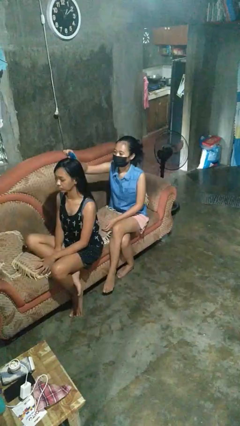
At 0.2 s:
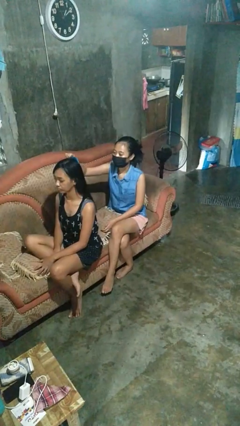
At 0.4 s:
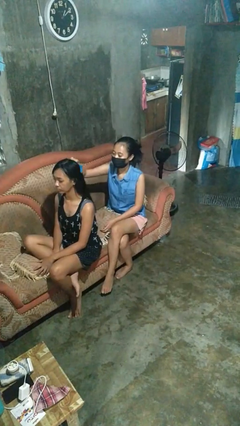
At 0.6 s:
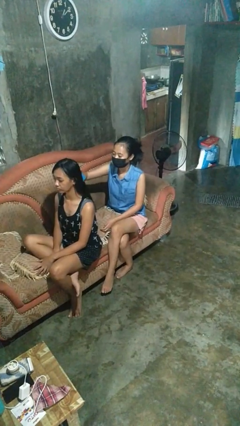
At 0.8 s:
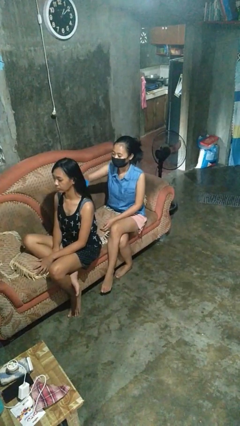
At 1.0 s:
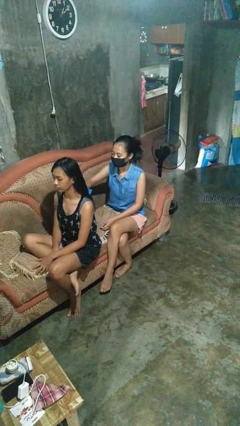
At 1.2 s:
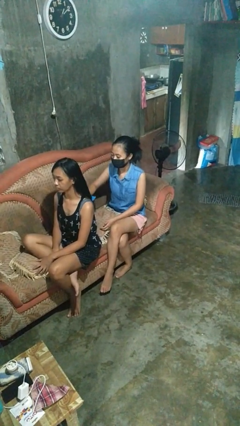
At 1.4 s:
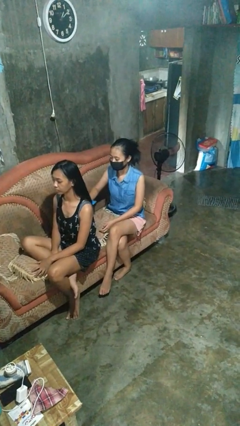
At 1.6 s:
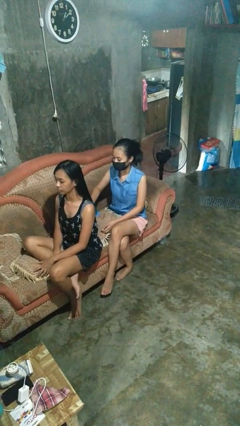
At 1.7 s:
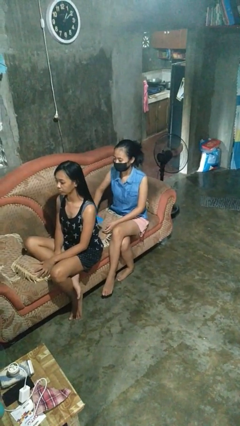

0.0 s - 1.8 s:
person brushes hair of person

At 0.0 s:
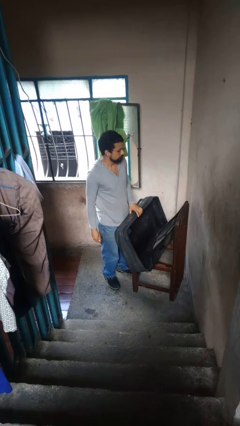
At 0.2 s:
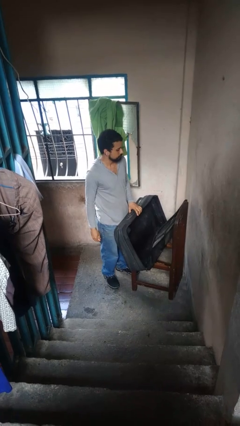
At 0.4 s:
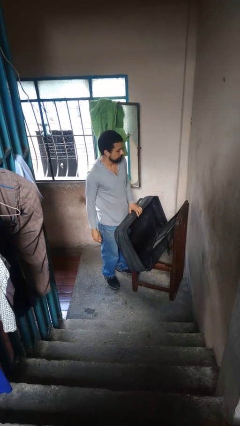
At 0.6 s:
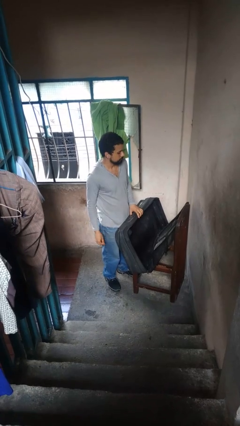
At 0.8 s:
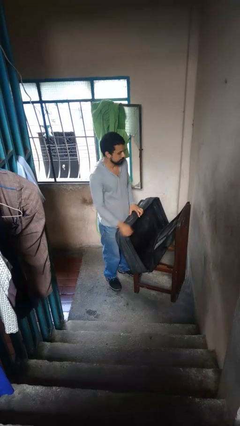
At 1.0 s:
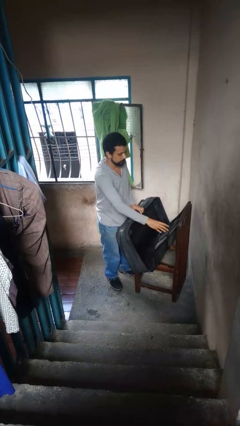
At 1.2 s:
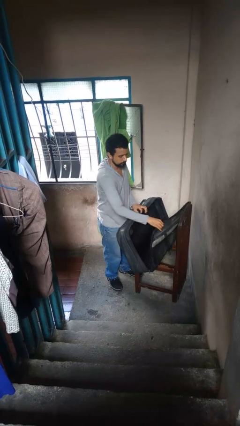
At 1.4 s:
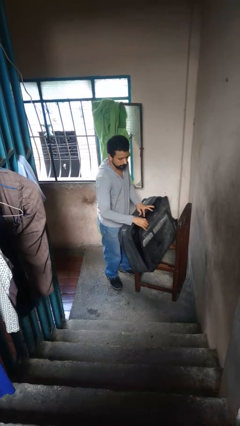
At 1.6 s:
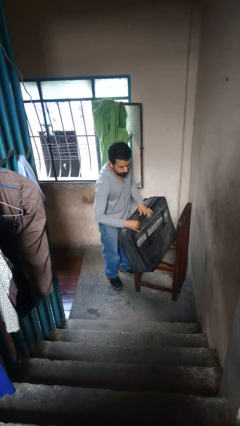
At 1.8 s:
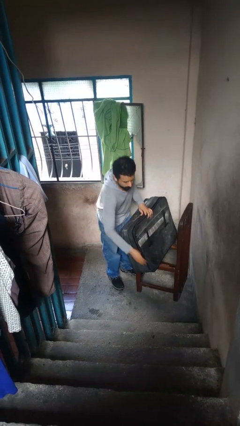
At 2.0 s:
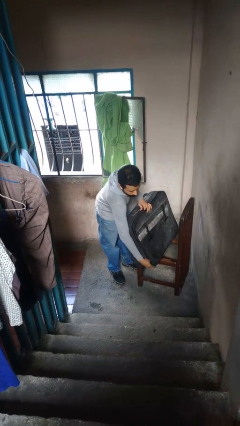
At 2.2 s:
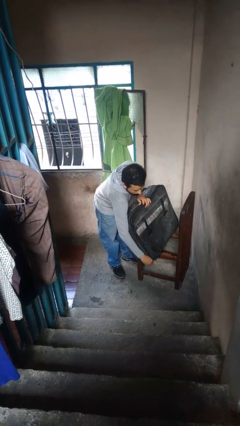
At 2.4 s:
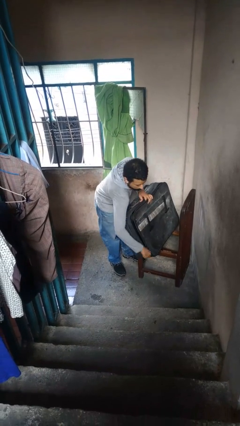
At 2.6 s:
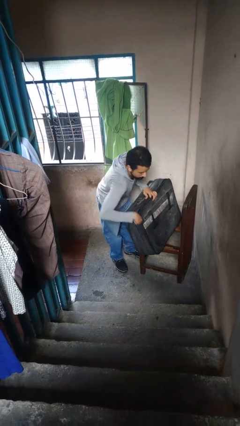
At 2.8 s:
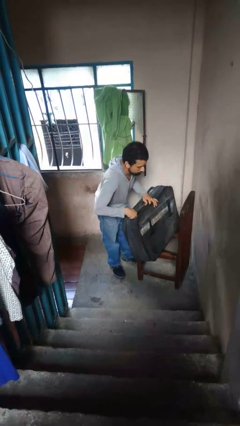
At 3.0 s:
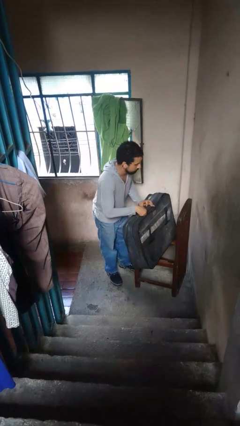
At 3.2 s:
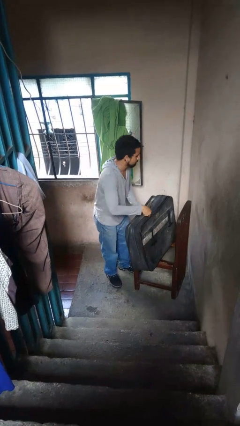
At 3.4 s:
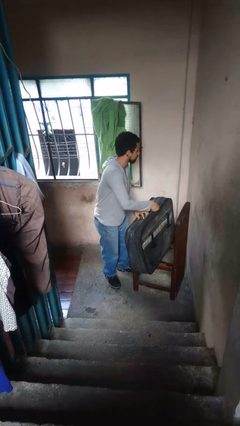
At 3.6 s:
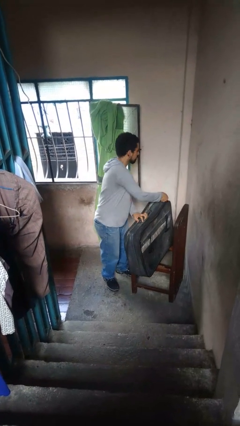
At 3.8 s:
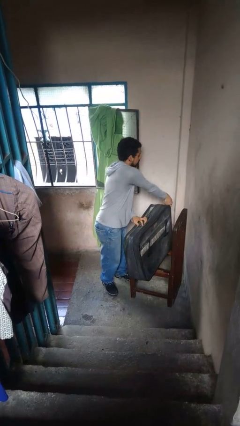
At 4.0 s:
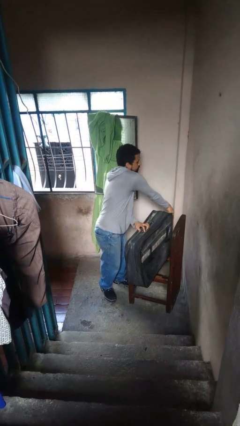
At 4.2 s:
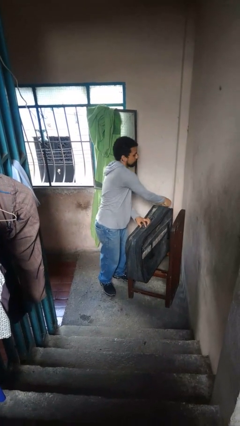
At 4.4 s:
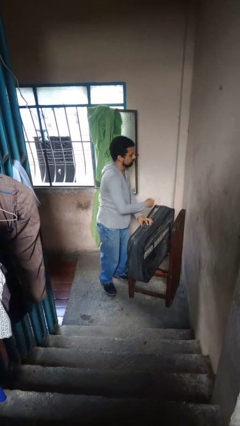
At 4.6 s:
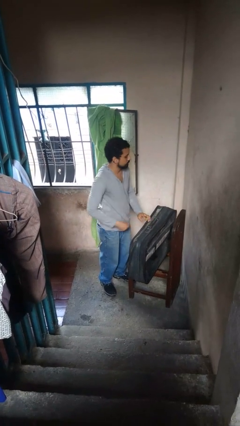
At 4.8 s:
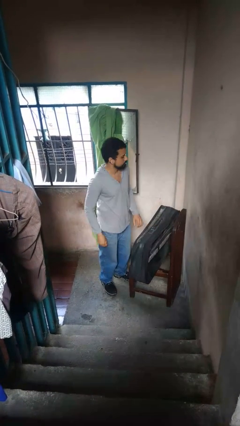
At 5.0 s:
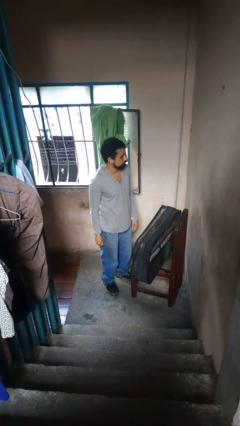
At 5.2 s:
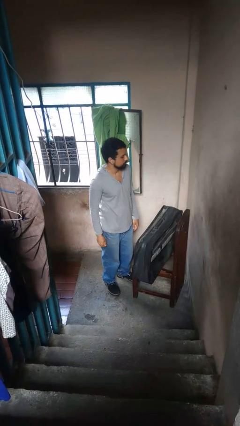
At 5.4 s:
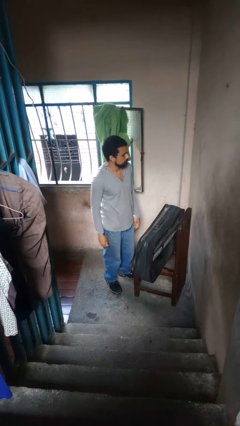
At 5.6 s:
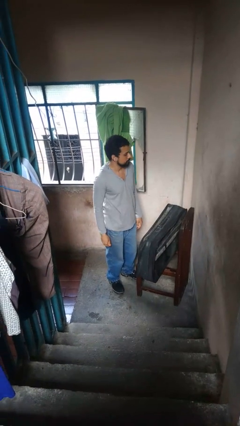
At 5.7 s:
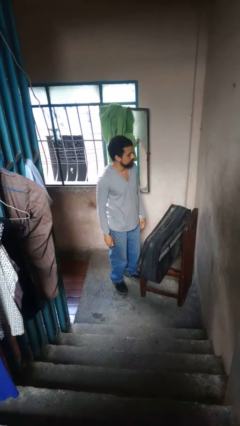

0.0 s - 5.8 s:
person closes suitcase

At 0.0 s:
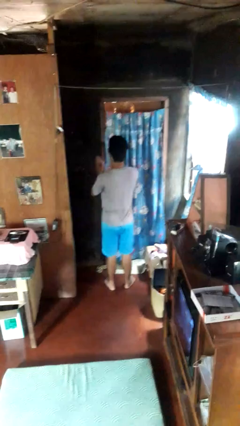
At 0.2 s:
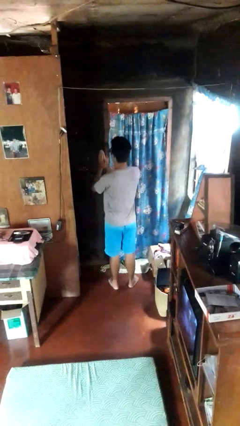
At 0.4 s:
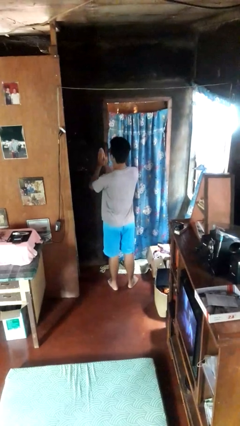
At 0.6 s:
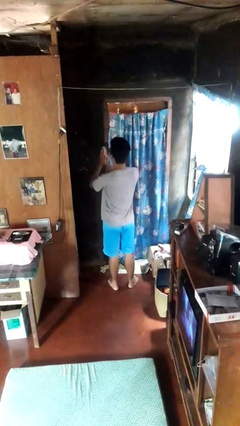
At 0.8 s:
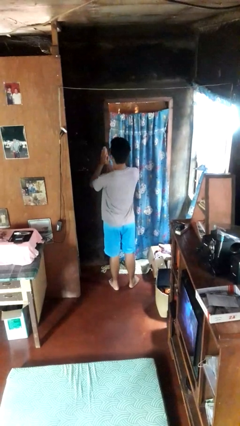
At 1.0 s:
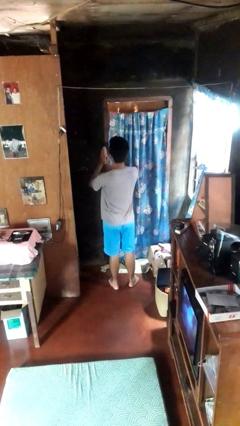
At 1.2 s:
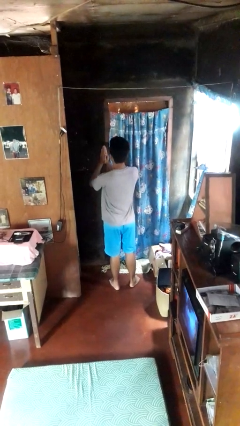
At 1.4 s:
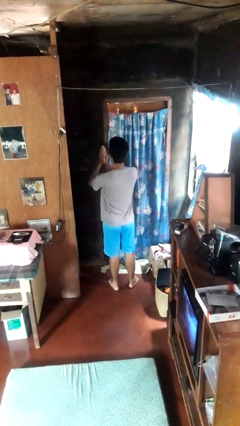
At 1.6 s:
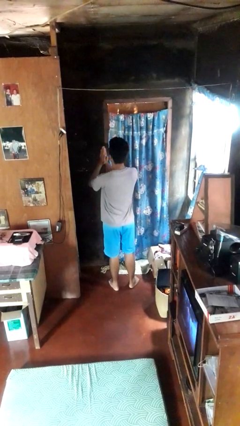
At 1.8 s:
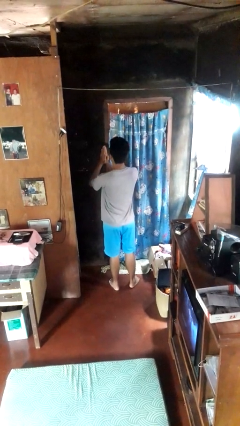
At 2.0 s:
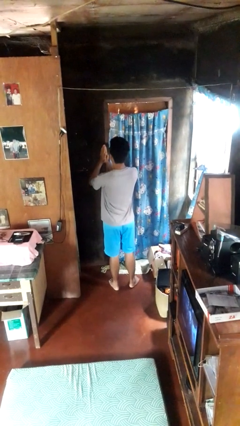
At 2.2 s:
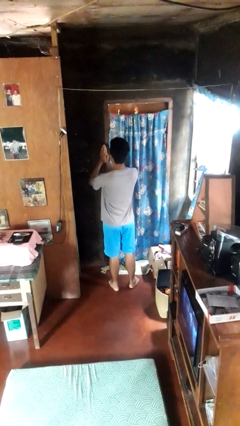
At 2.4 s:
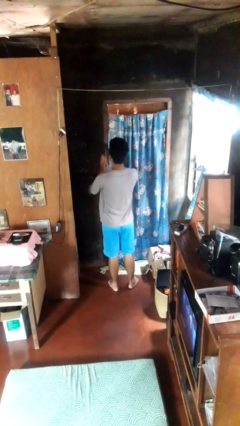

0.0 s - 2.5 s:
person prays

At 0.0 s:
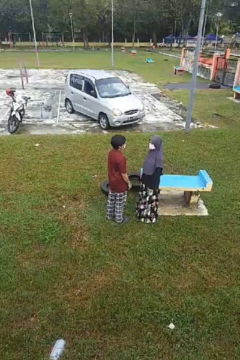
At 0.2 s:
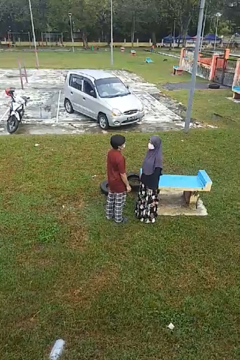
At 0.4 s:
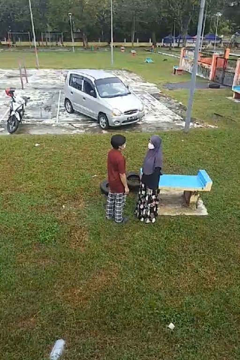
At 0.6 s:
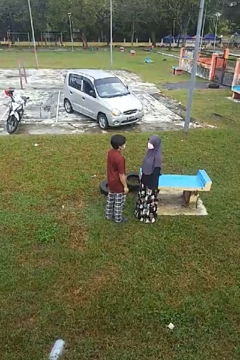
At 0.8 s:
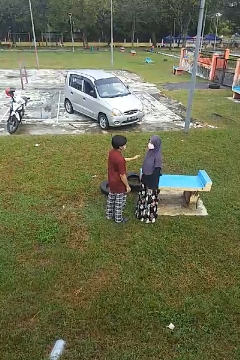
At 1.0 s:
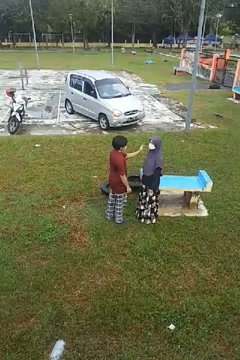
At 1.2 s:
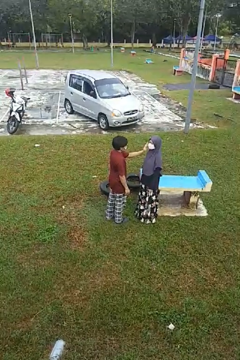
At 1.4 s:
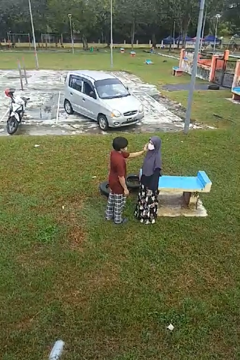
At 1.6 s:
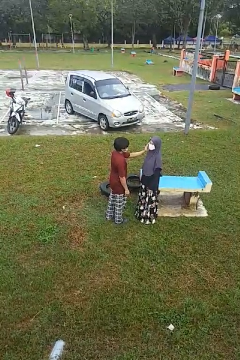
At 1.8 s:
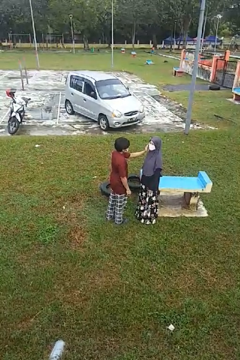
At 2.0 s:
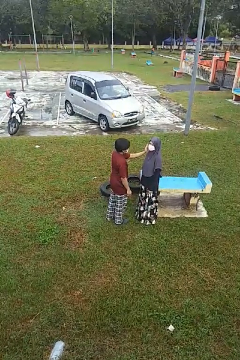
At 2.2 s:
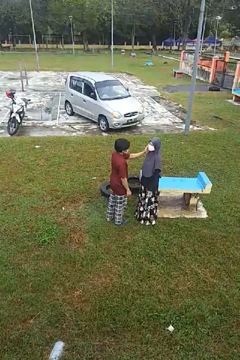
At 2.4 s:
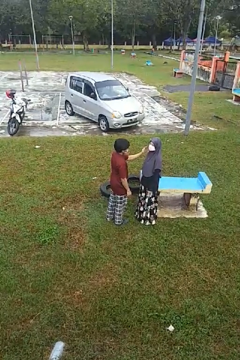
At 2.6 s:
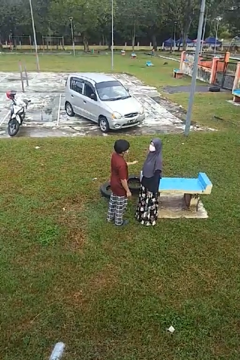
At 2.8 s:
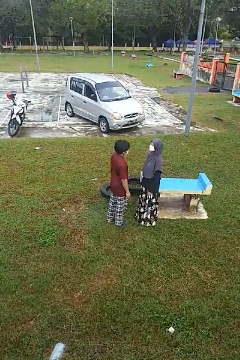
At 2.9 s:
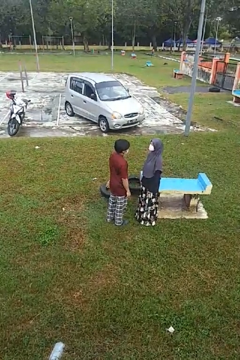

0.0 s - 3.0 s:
person touches face of person

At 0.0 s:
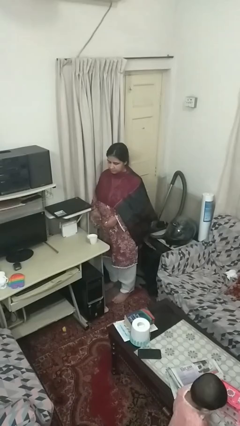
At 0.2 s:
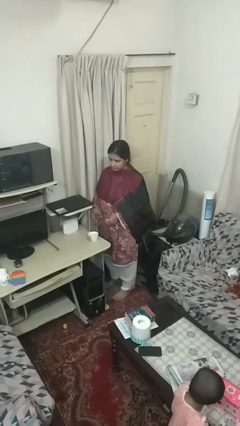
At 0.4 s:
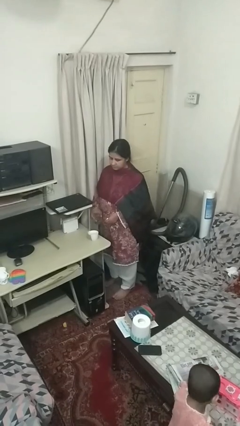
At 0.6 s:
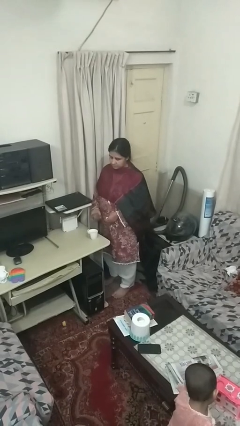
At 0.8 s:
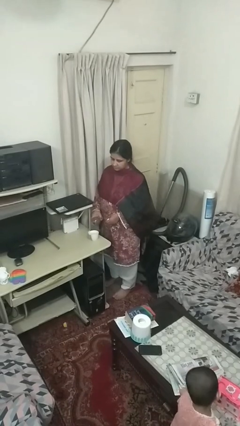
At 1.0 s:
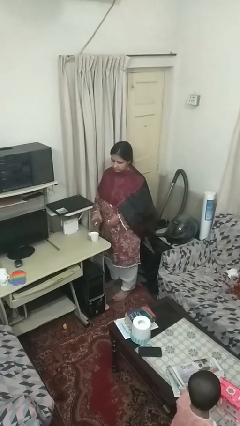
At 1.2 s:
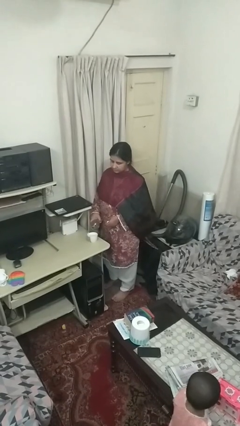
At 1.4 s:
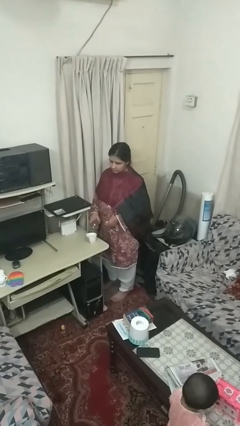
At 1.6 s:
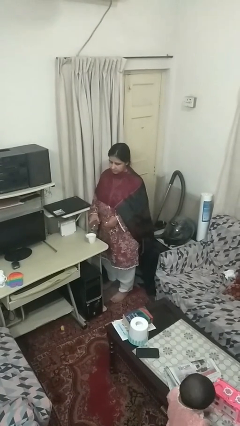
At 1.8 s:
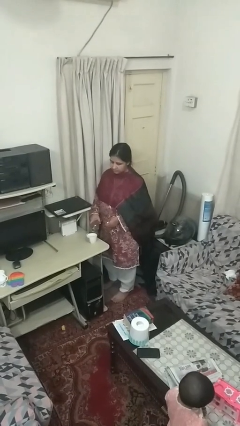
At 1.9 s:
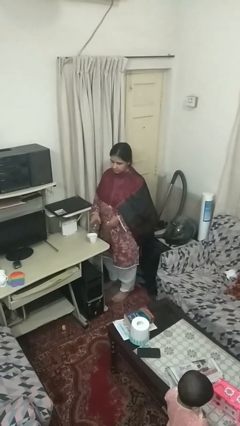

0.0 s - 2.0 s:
person pours liquid into cup

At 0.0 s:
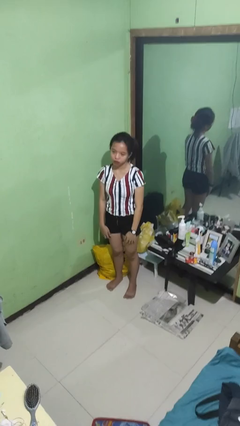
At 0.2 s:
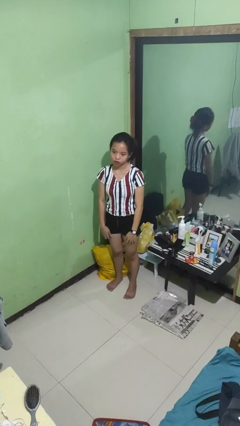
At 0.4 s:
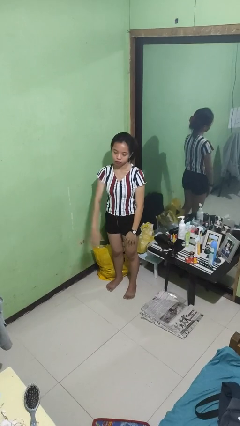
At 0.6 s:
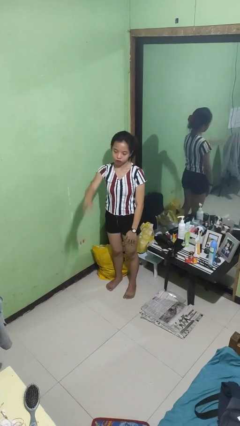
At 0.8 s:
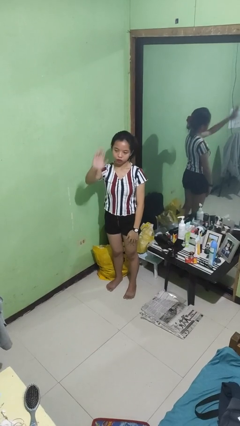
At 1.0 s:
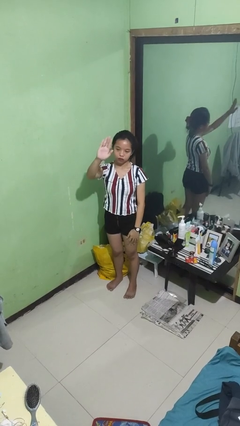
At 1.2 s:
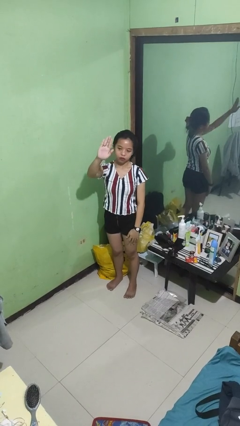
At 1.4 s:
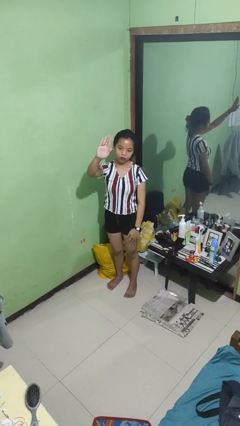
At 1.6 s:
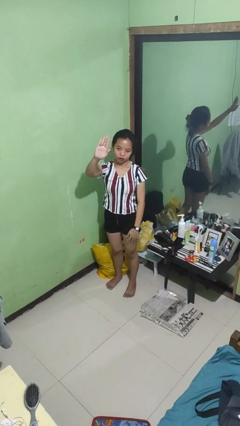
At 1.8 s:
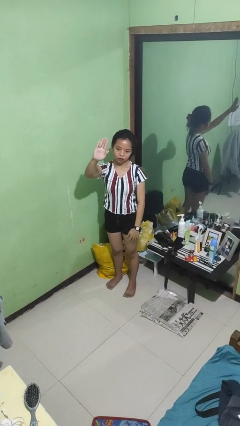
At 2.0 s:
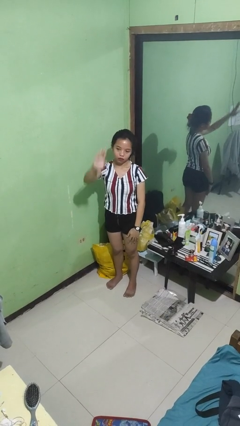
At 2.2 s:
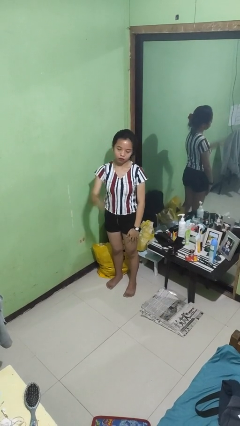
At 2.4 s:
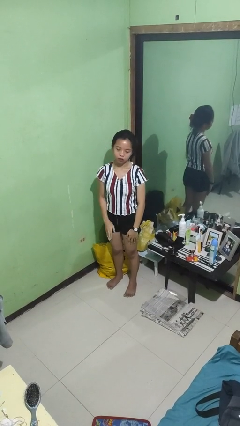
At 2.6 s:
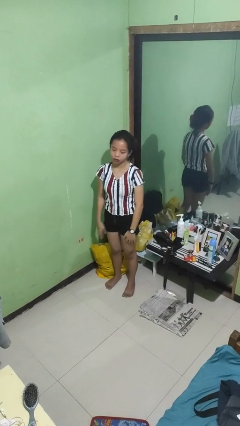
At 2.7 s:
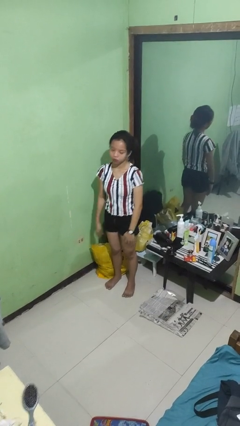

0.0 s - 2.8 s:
person gestures stop
